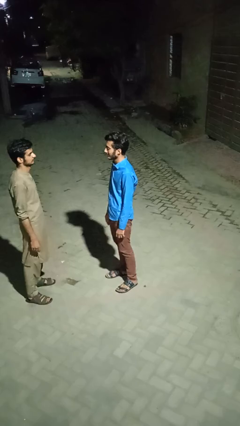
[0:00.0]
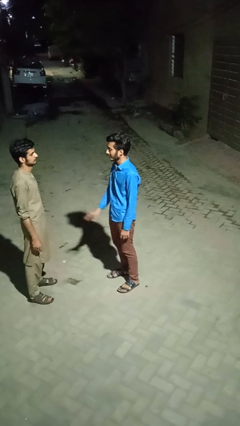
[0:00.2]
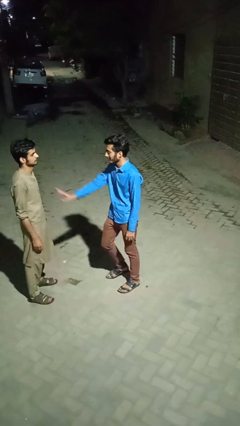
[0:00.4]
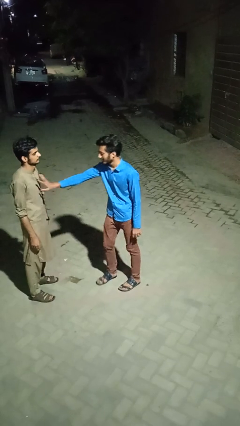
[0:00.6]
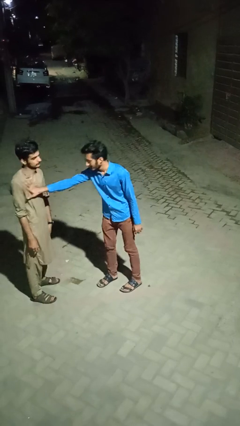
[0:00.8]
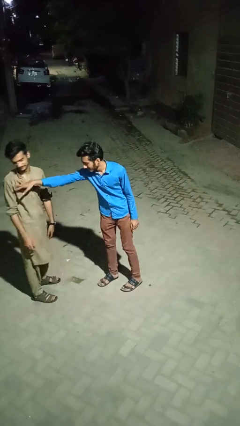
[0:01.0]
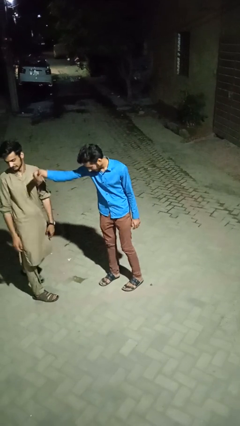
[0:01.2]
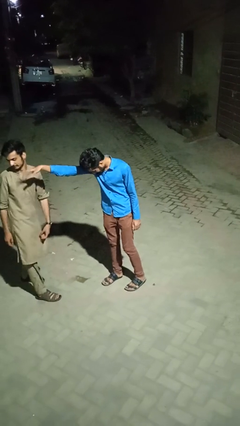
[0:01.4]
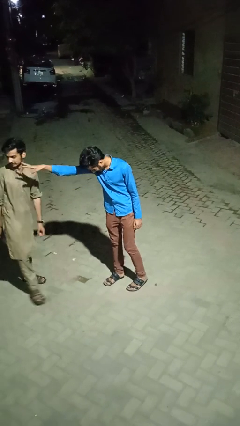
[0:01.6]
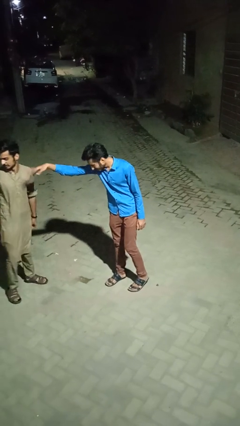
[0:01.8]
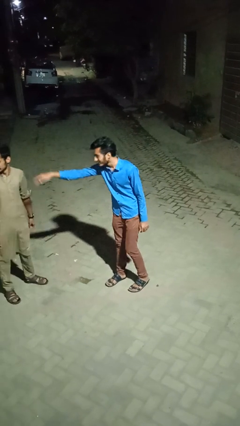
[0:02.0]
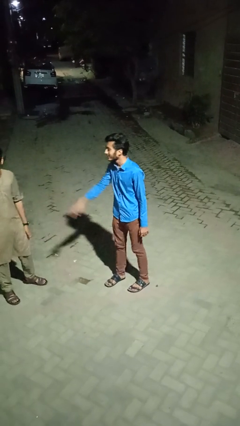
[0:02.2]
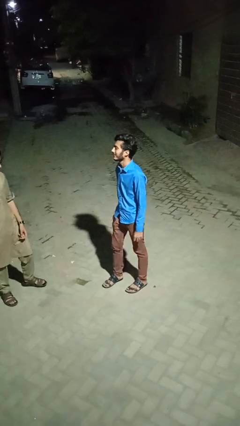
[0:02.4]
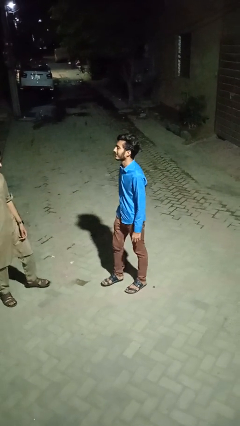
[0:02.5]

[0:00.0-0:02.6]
person shoves person

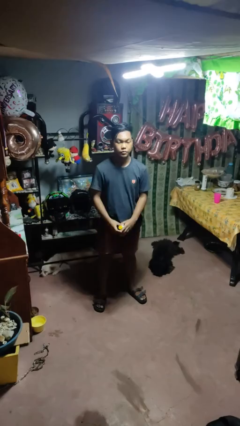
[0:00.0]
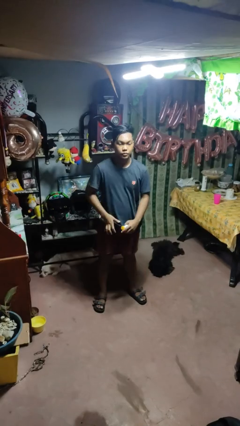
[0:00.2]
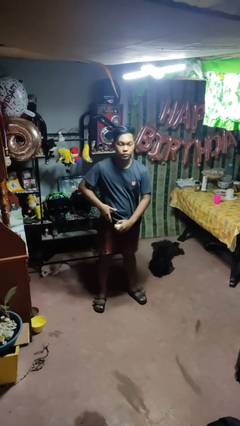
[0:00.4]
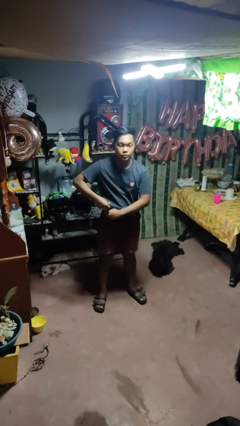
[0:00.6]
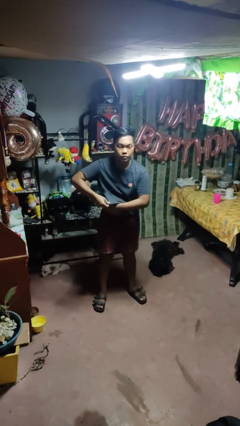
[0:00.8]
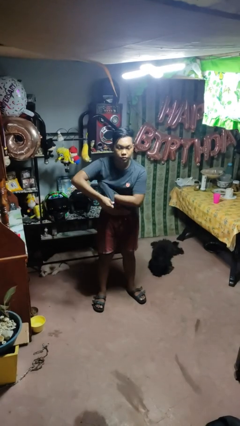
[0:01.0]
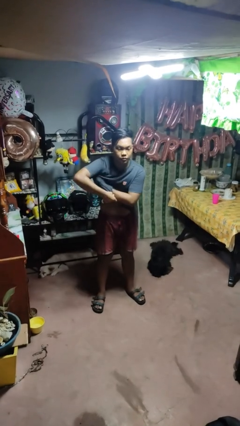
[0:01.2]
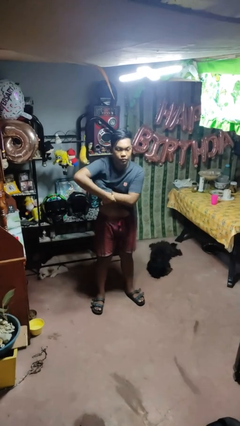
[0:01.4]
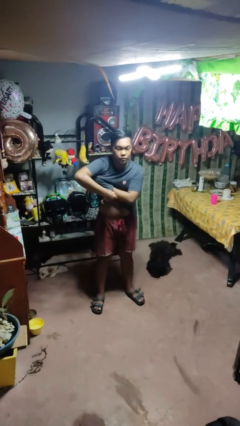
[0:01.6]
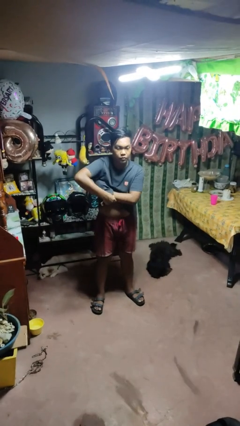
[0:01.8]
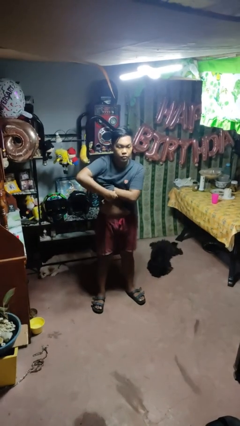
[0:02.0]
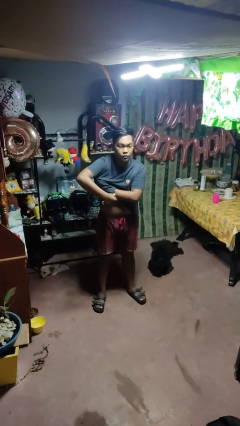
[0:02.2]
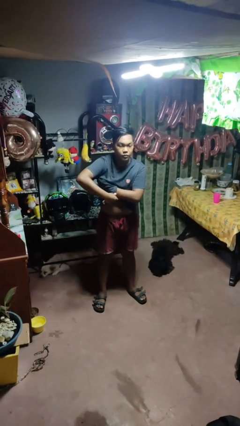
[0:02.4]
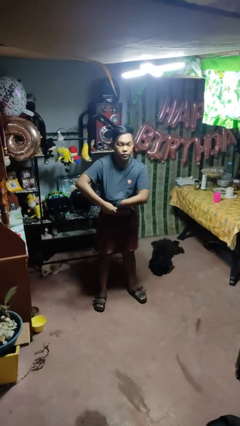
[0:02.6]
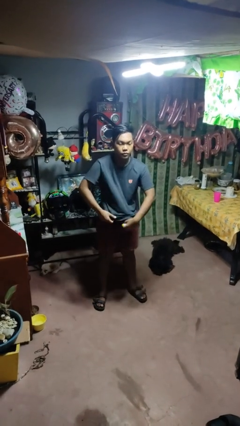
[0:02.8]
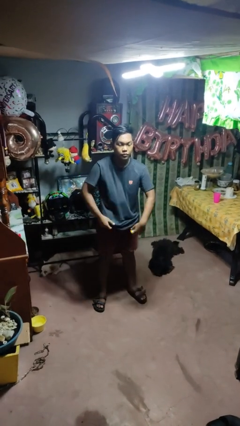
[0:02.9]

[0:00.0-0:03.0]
person applies deodorant

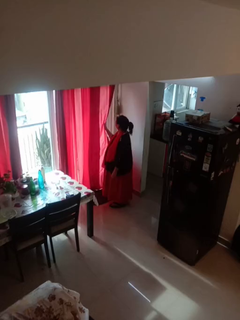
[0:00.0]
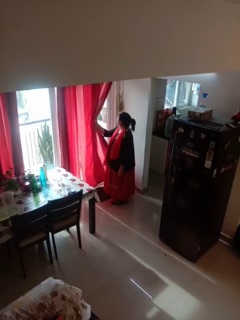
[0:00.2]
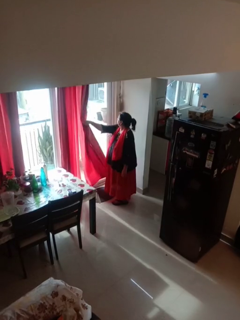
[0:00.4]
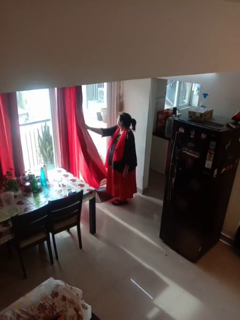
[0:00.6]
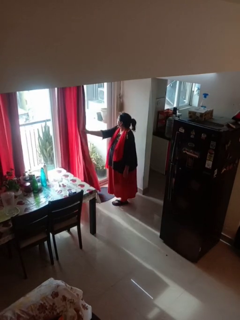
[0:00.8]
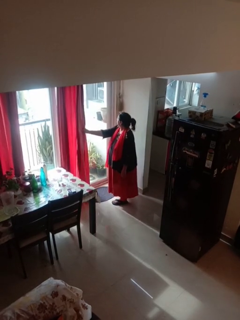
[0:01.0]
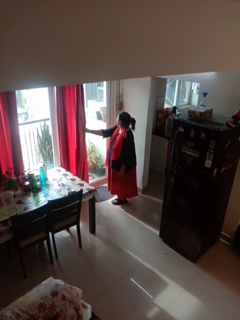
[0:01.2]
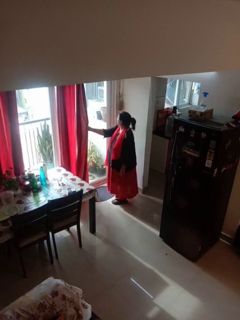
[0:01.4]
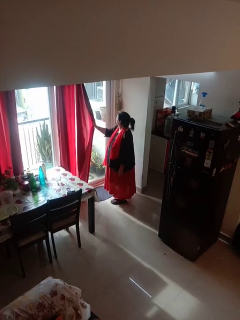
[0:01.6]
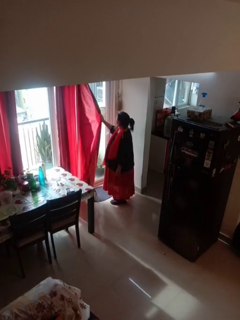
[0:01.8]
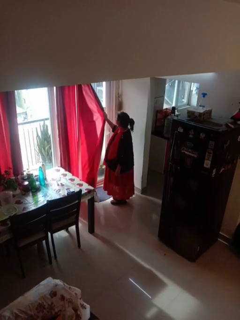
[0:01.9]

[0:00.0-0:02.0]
person opens curtains

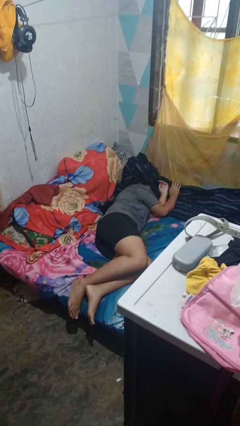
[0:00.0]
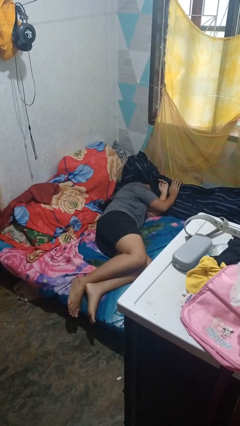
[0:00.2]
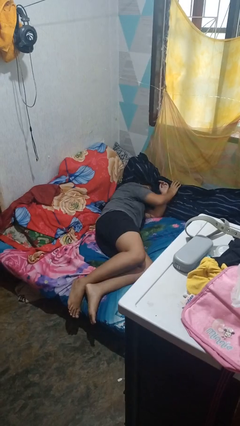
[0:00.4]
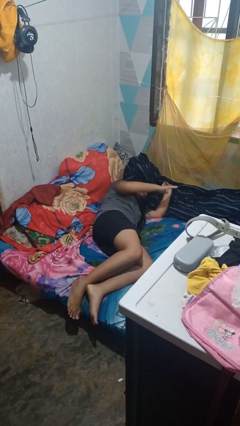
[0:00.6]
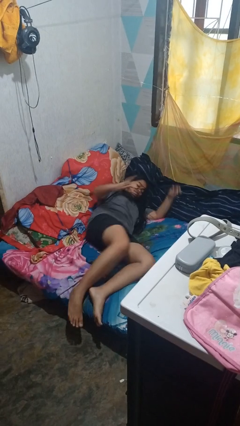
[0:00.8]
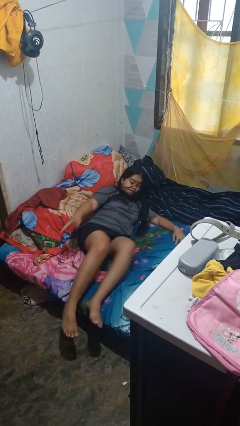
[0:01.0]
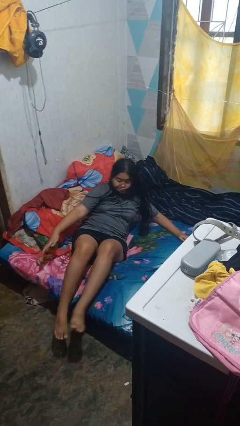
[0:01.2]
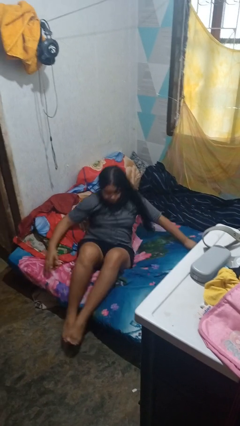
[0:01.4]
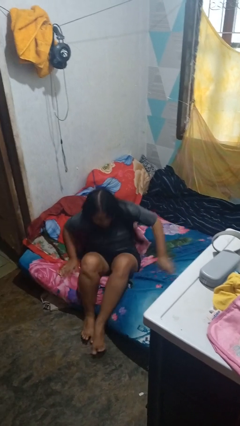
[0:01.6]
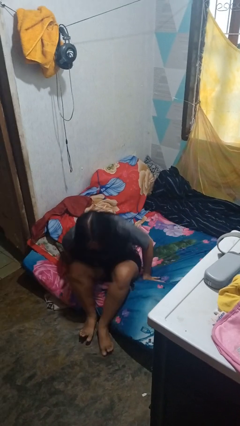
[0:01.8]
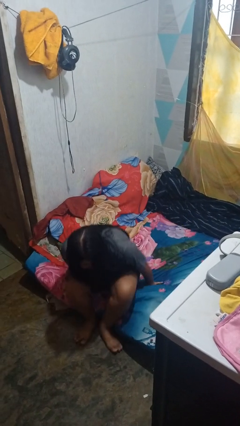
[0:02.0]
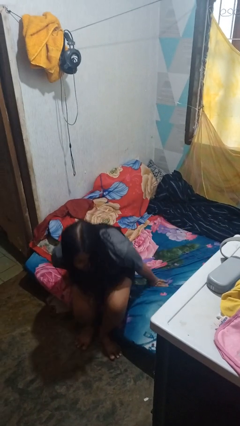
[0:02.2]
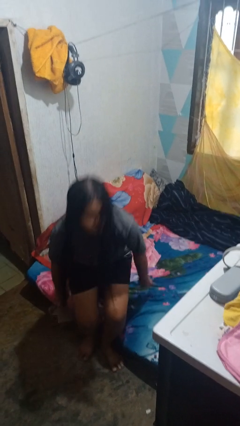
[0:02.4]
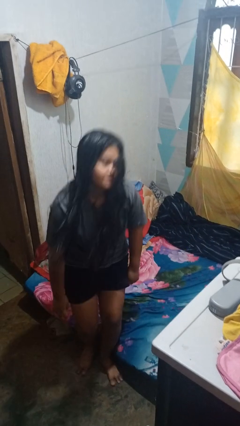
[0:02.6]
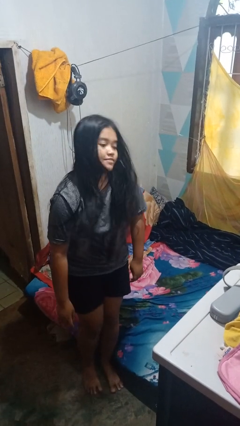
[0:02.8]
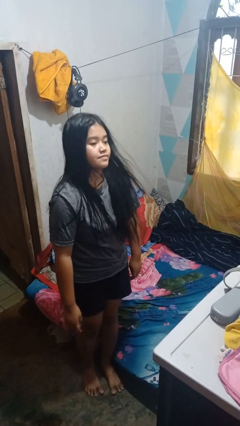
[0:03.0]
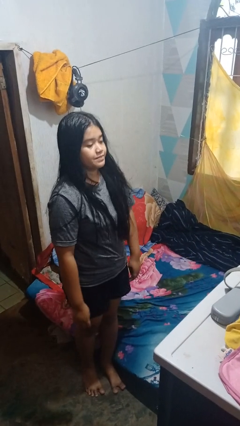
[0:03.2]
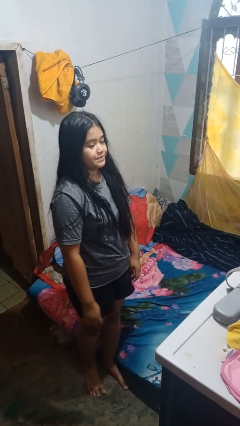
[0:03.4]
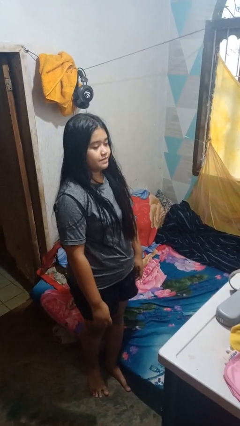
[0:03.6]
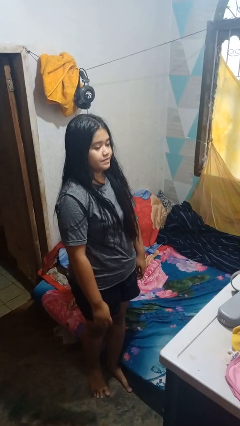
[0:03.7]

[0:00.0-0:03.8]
person stands up

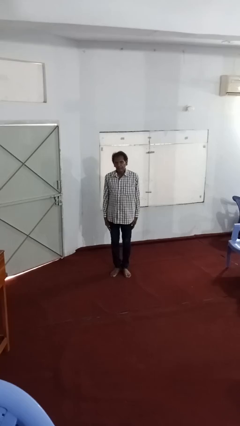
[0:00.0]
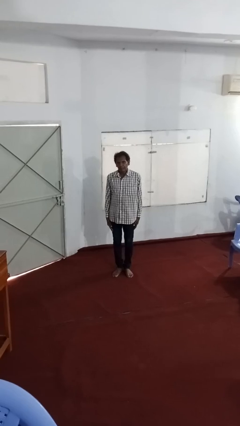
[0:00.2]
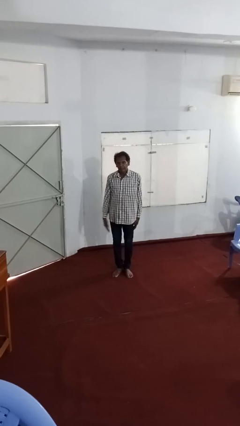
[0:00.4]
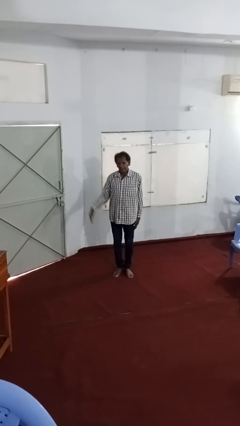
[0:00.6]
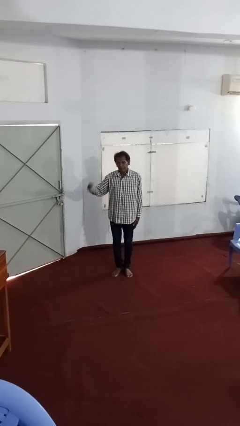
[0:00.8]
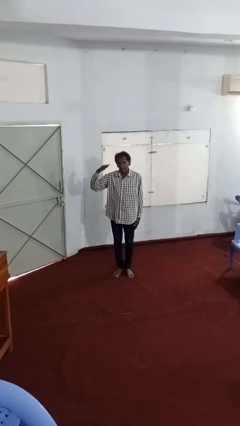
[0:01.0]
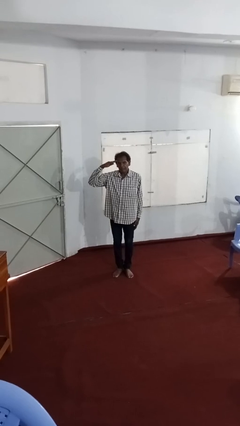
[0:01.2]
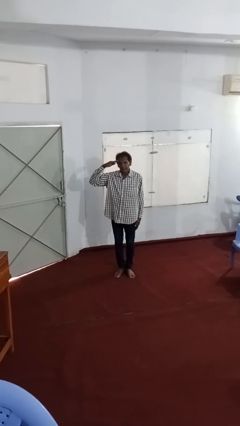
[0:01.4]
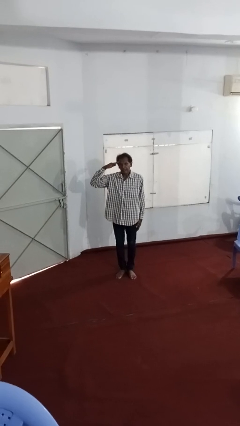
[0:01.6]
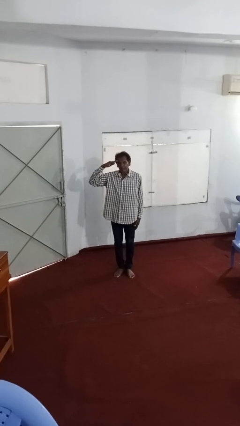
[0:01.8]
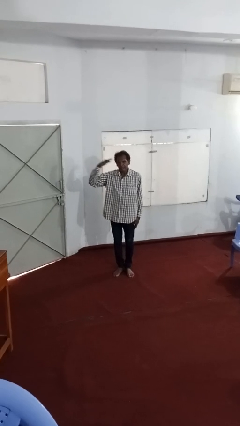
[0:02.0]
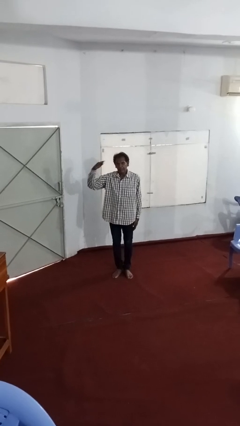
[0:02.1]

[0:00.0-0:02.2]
person salutes

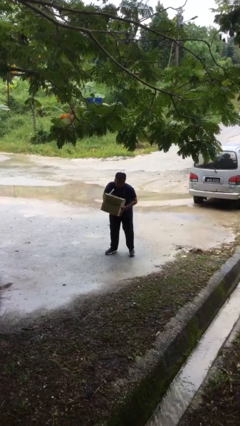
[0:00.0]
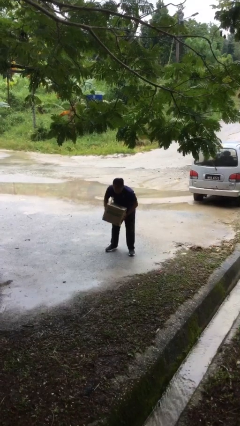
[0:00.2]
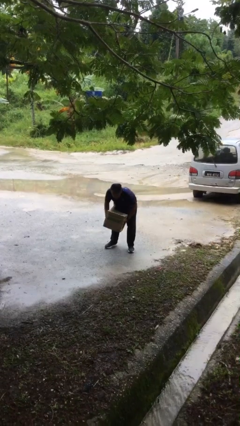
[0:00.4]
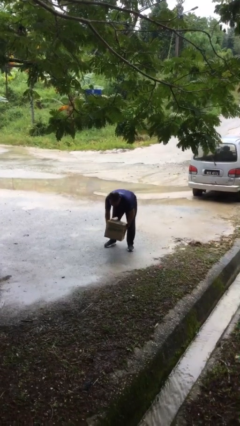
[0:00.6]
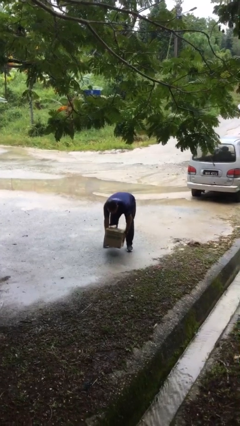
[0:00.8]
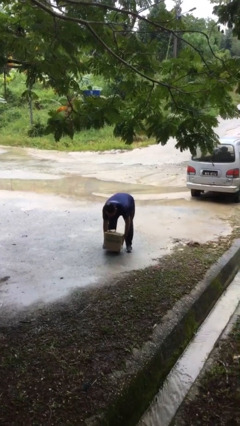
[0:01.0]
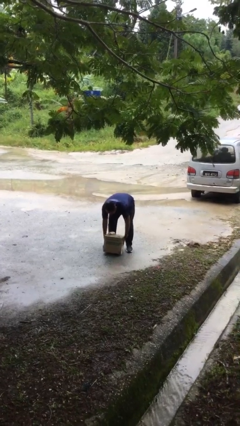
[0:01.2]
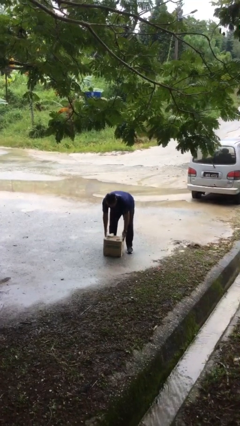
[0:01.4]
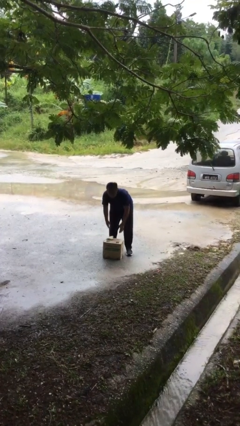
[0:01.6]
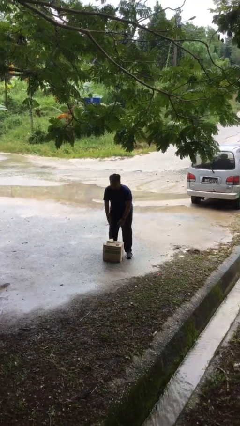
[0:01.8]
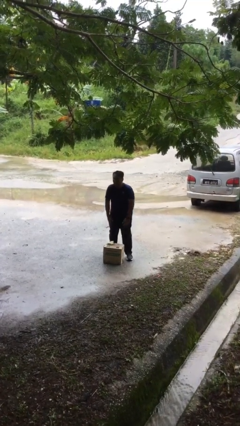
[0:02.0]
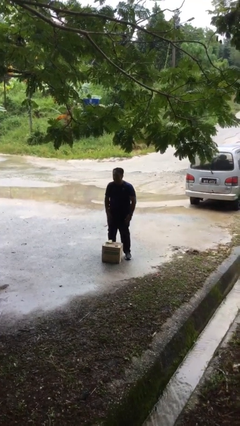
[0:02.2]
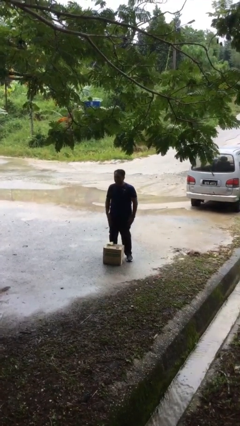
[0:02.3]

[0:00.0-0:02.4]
person puts down object on floor

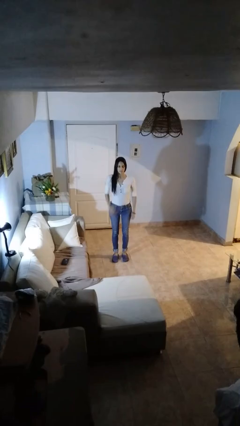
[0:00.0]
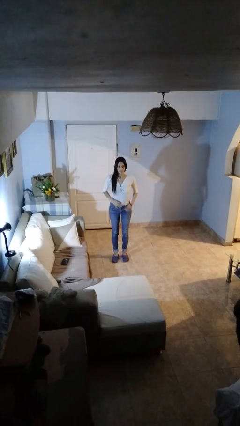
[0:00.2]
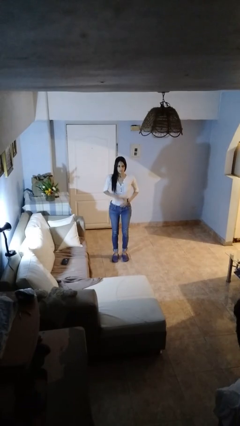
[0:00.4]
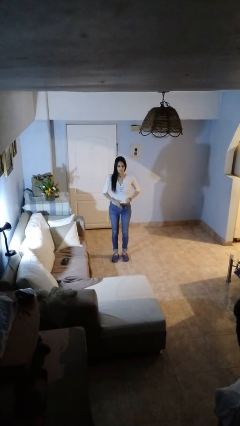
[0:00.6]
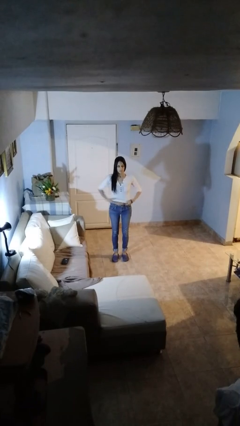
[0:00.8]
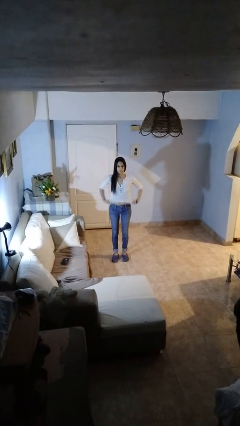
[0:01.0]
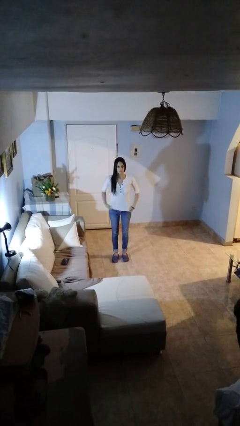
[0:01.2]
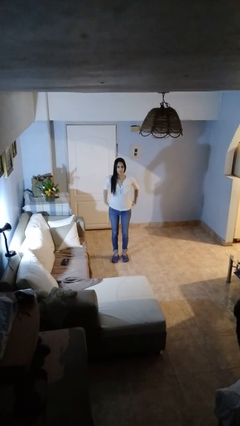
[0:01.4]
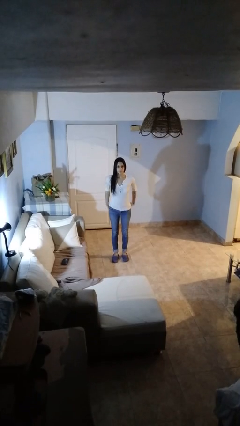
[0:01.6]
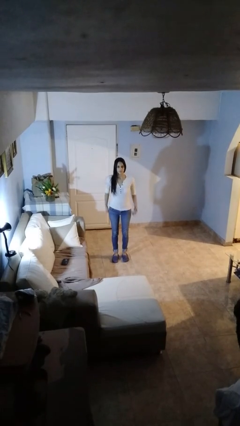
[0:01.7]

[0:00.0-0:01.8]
person untucks shirt
